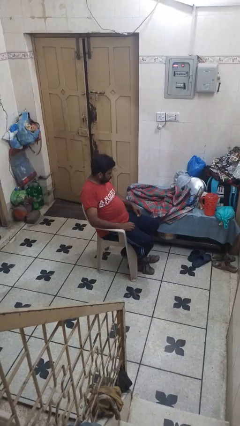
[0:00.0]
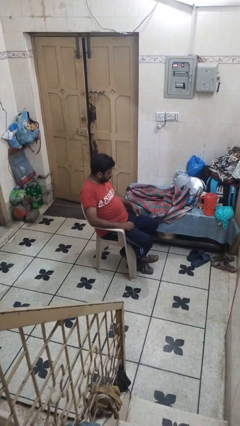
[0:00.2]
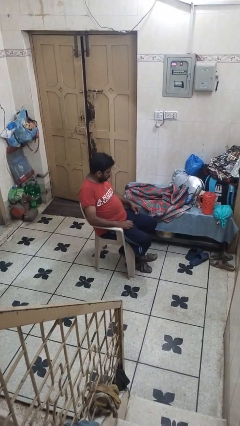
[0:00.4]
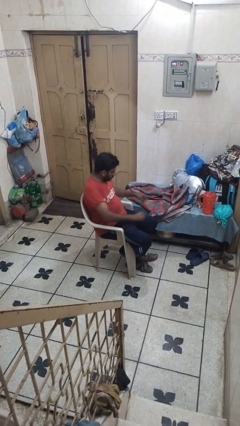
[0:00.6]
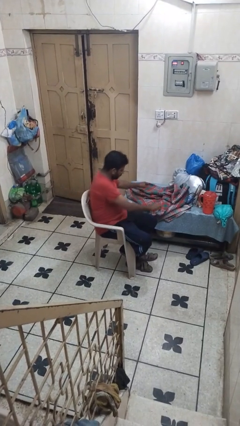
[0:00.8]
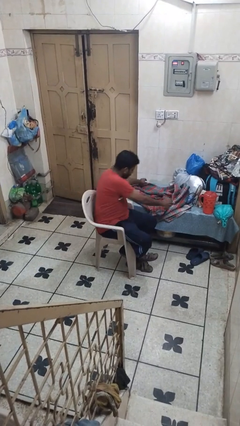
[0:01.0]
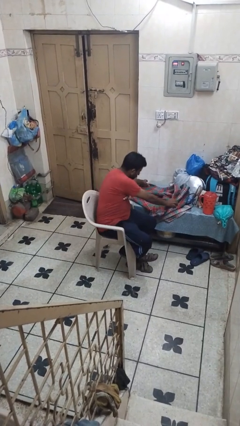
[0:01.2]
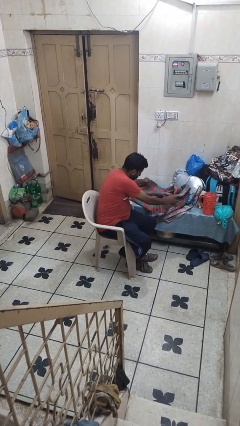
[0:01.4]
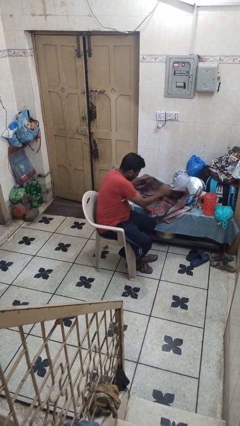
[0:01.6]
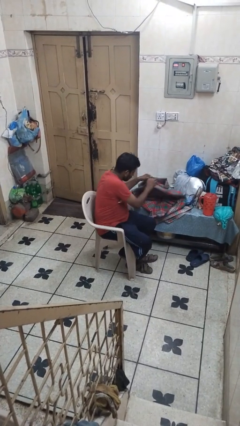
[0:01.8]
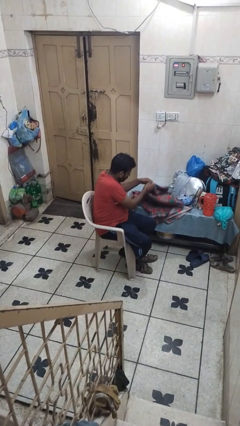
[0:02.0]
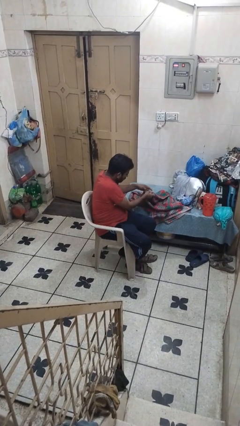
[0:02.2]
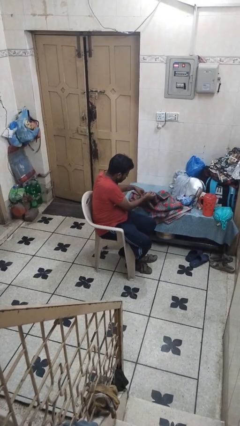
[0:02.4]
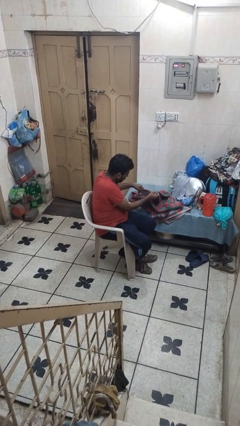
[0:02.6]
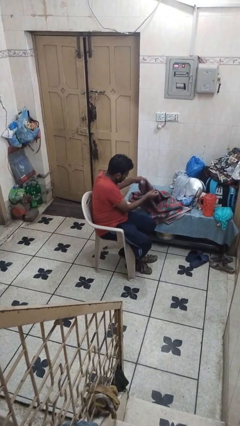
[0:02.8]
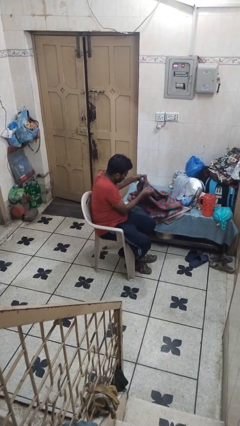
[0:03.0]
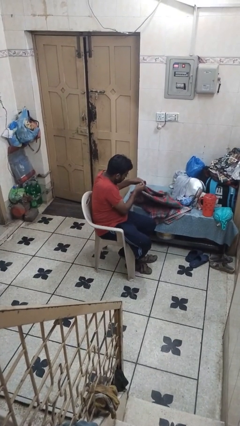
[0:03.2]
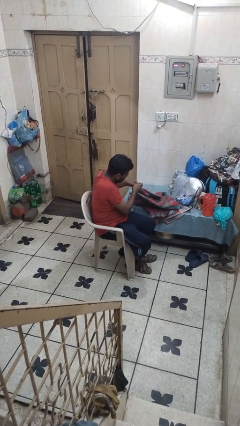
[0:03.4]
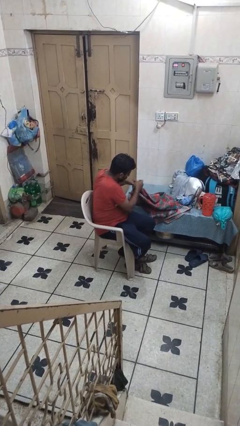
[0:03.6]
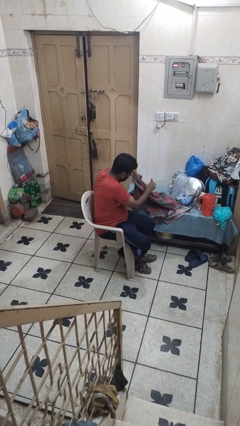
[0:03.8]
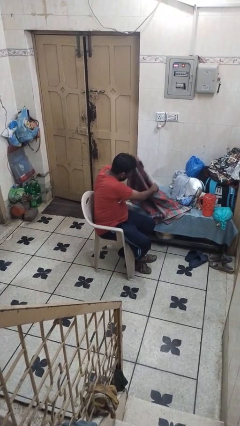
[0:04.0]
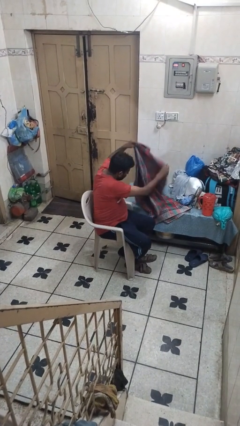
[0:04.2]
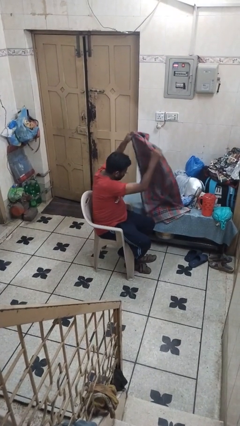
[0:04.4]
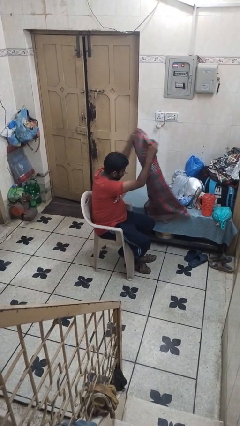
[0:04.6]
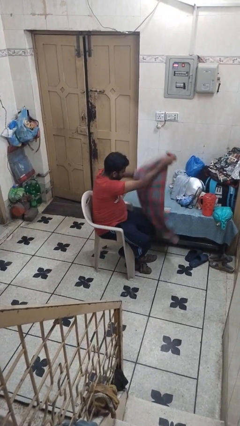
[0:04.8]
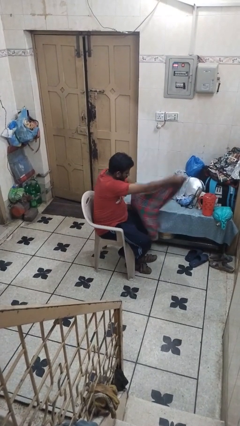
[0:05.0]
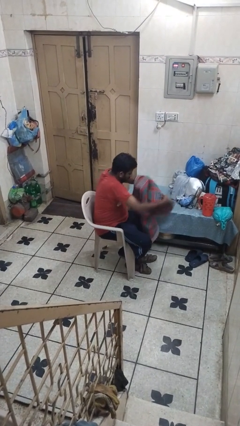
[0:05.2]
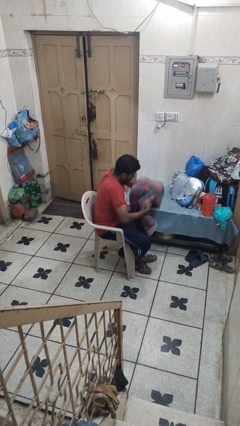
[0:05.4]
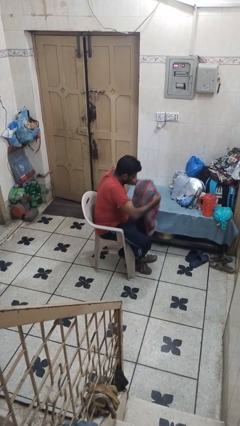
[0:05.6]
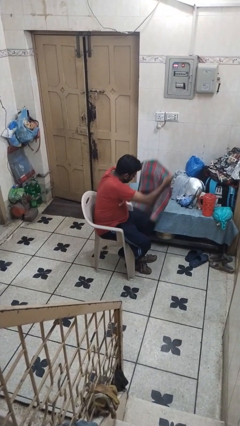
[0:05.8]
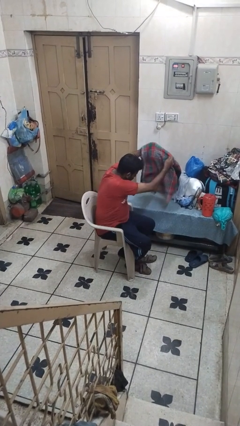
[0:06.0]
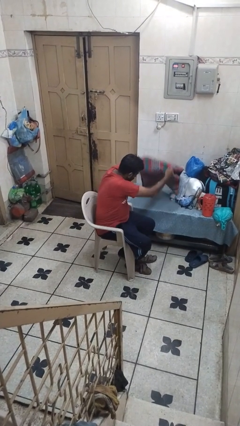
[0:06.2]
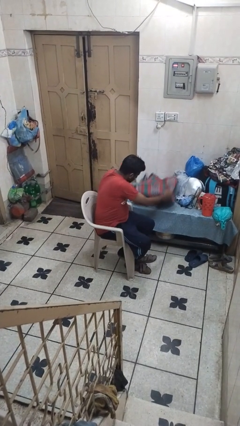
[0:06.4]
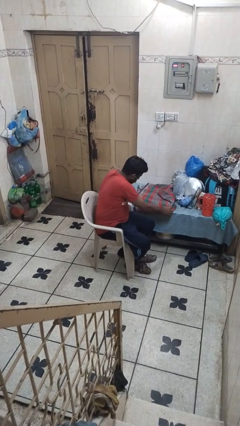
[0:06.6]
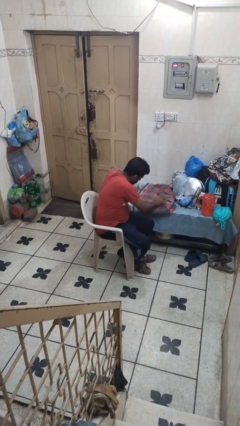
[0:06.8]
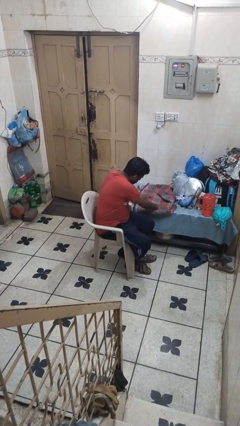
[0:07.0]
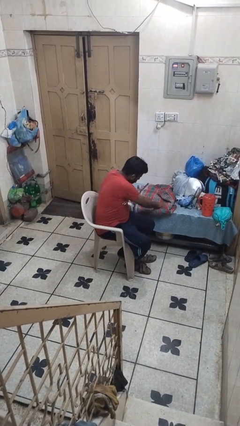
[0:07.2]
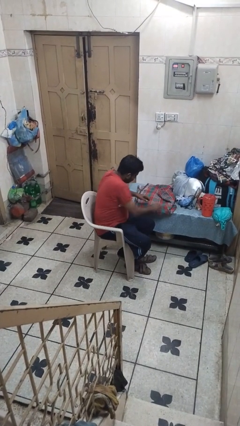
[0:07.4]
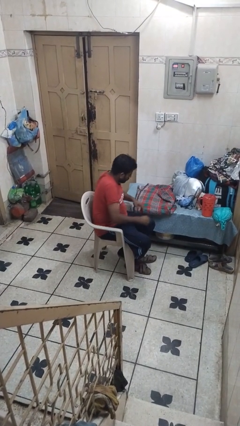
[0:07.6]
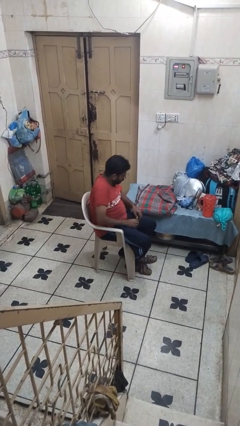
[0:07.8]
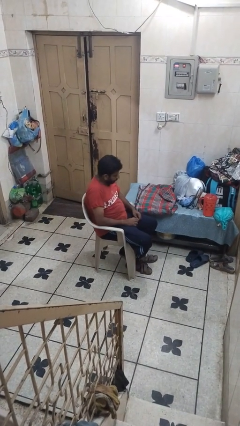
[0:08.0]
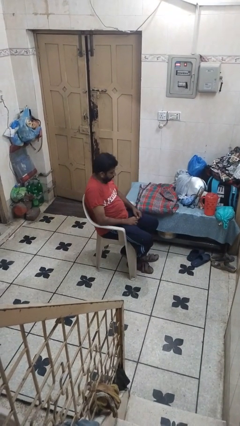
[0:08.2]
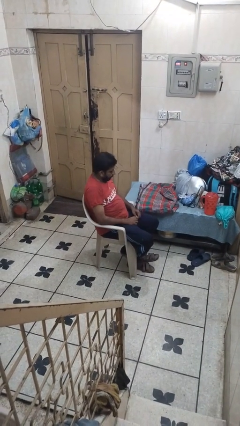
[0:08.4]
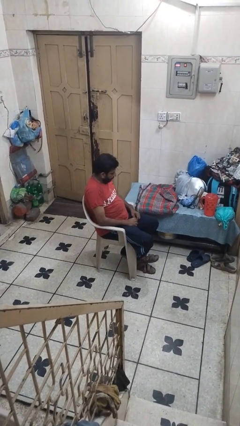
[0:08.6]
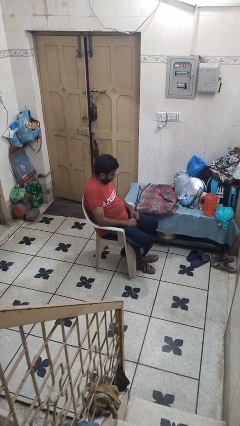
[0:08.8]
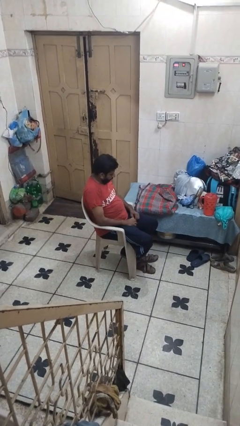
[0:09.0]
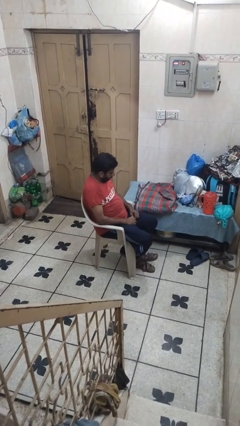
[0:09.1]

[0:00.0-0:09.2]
person folds blanket

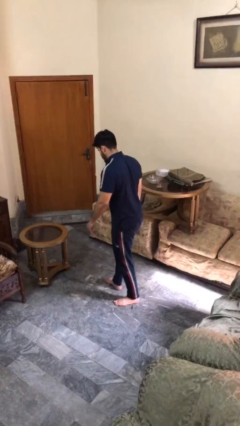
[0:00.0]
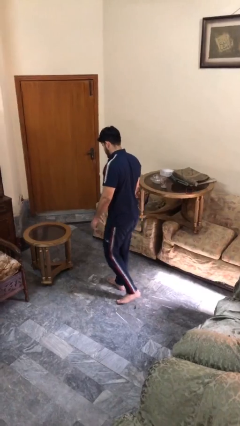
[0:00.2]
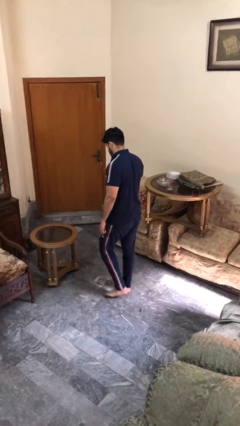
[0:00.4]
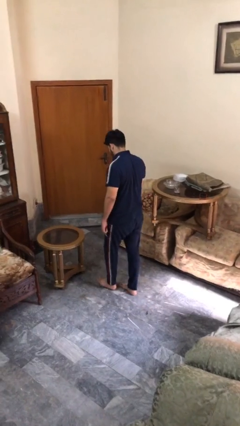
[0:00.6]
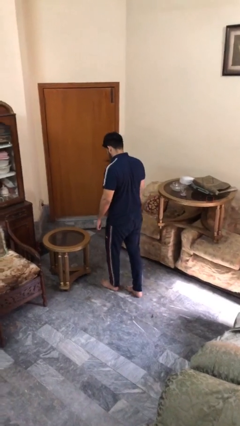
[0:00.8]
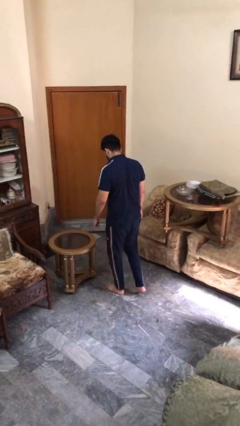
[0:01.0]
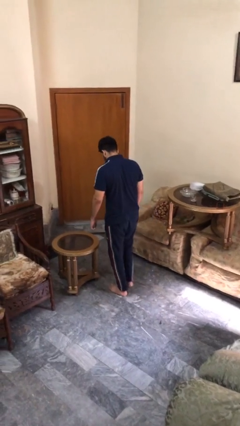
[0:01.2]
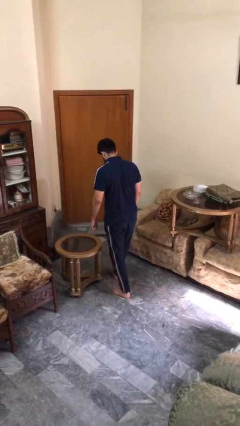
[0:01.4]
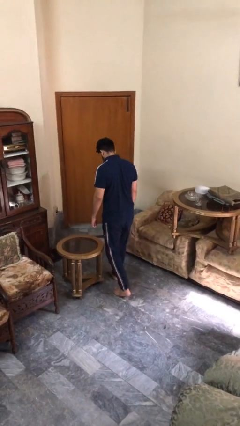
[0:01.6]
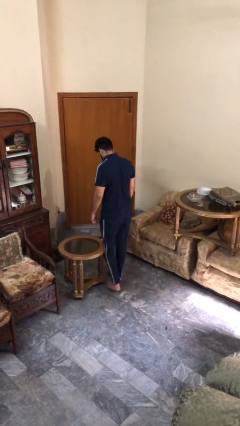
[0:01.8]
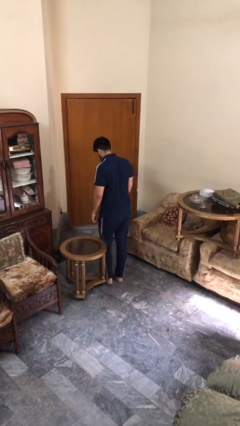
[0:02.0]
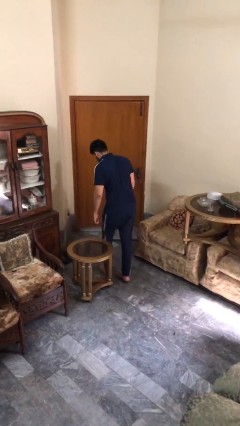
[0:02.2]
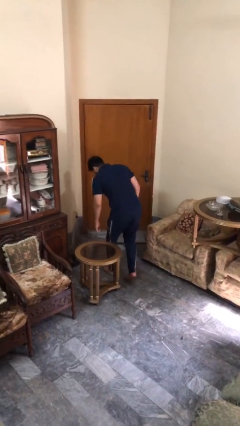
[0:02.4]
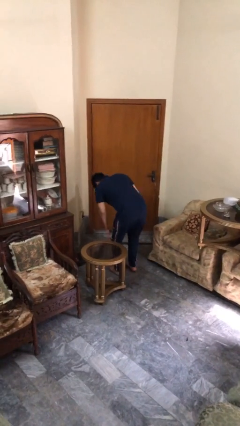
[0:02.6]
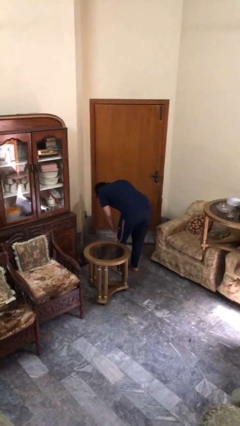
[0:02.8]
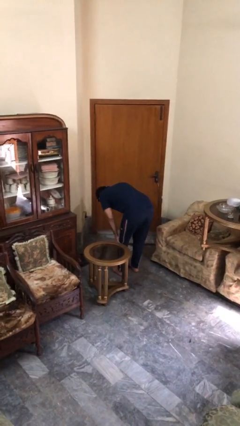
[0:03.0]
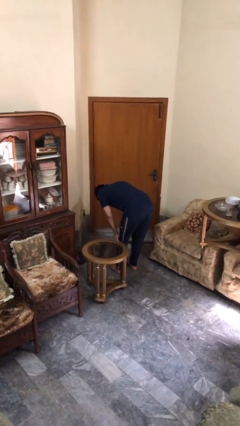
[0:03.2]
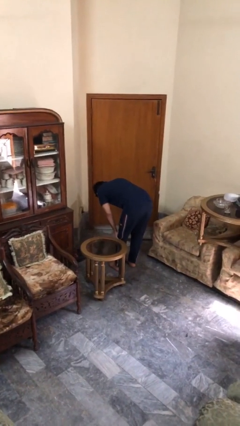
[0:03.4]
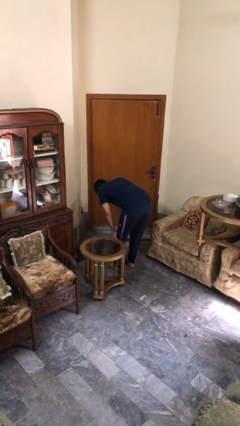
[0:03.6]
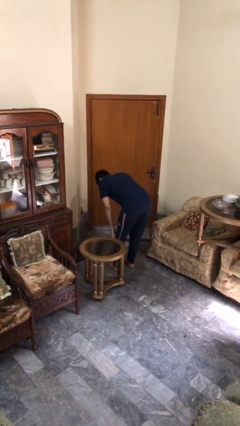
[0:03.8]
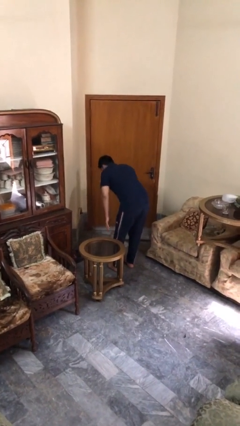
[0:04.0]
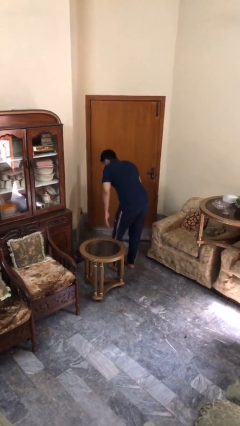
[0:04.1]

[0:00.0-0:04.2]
person stubs toe

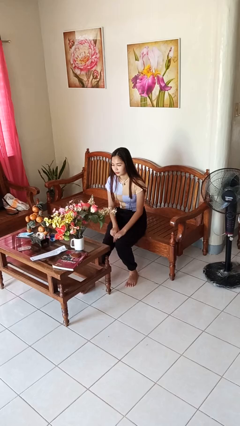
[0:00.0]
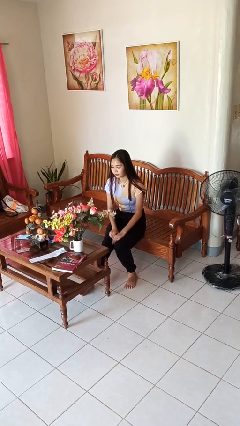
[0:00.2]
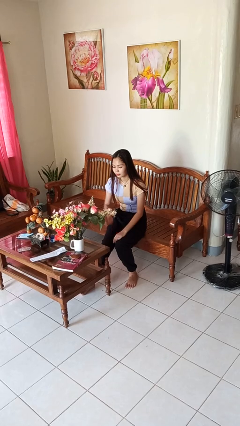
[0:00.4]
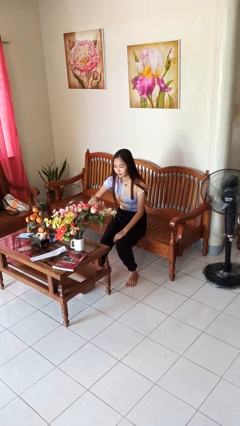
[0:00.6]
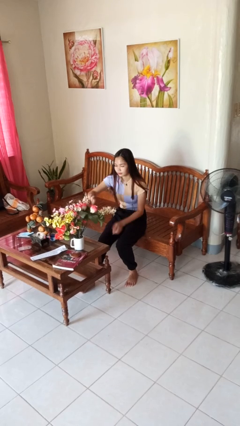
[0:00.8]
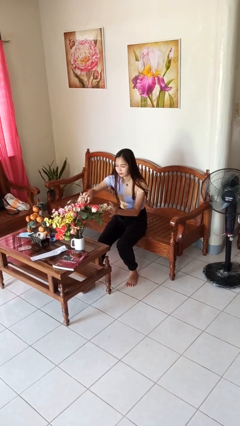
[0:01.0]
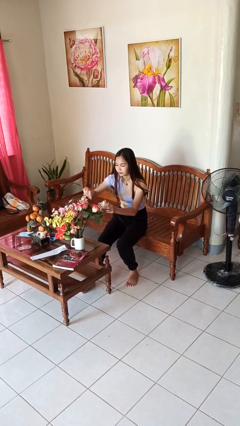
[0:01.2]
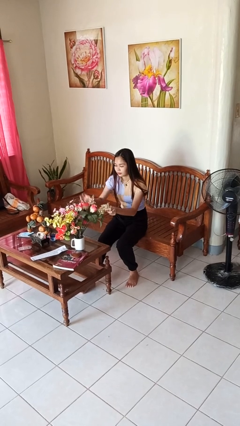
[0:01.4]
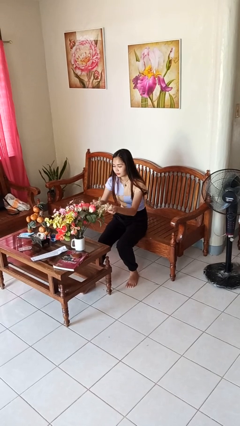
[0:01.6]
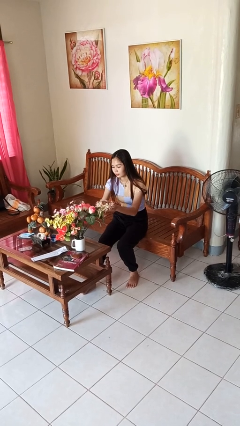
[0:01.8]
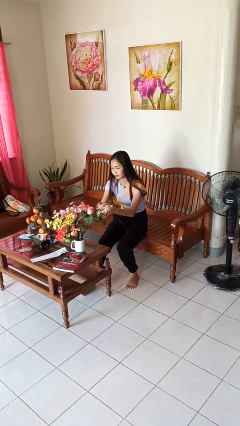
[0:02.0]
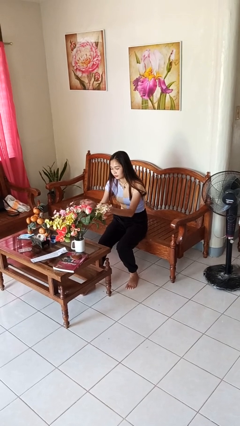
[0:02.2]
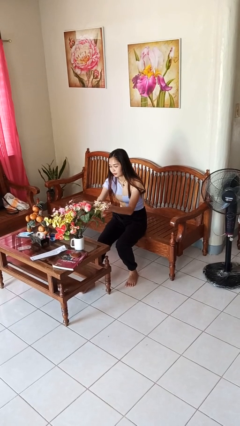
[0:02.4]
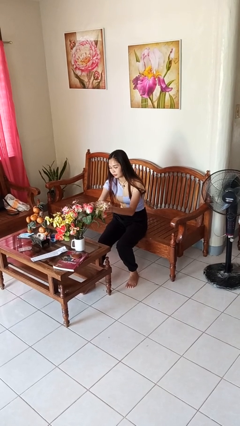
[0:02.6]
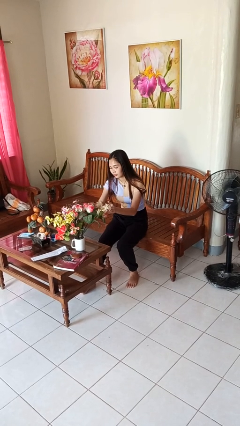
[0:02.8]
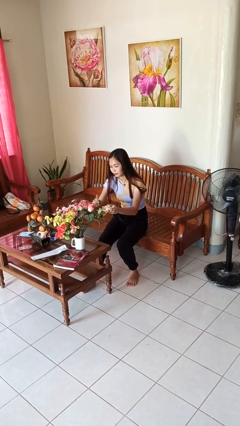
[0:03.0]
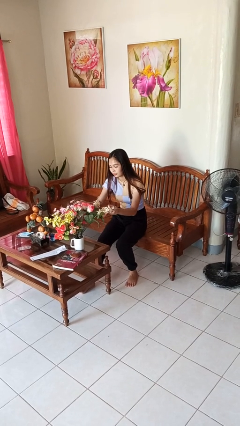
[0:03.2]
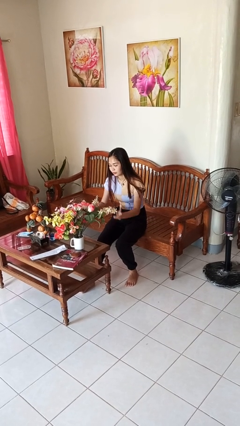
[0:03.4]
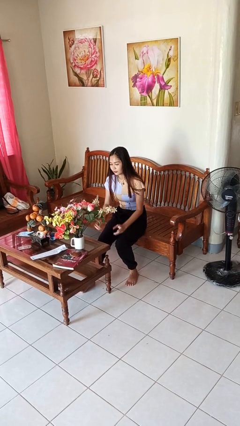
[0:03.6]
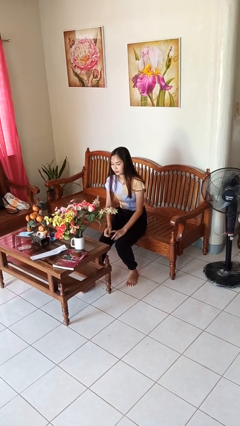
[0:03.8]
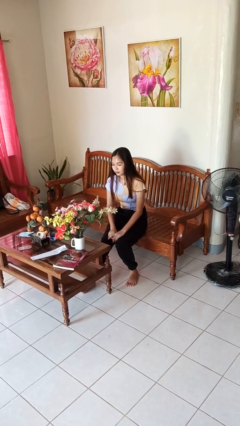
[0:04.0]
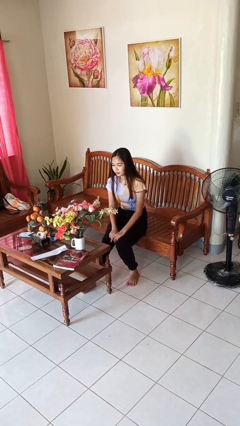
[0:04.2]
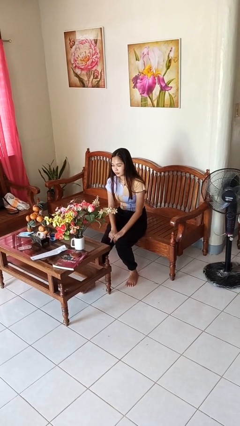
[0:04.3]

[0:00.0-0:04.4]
person arranges flowers in vase
